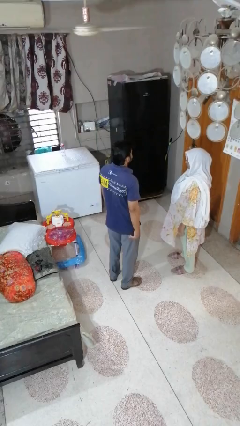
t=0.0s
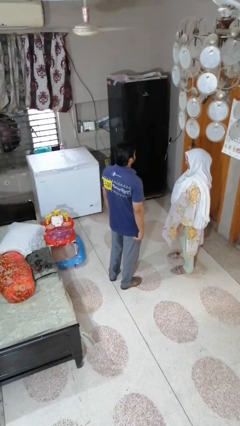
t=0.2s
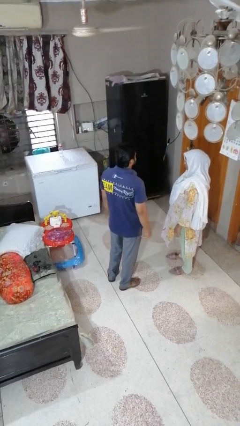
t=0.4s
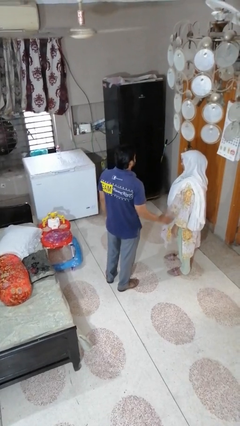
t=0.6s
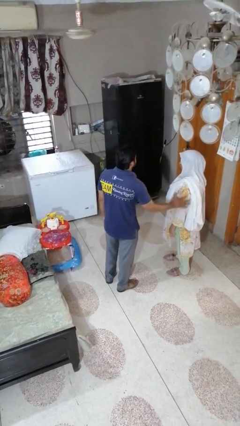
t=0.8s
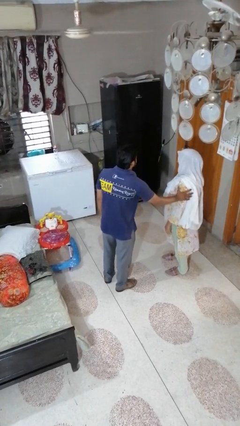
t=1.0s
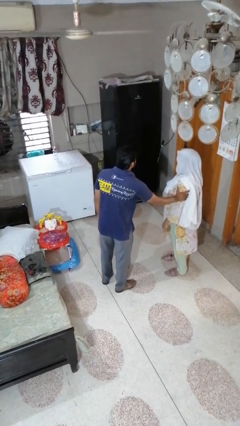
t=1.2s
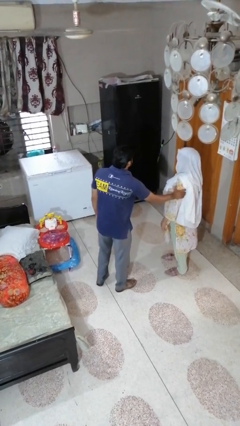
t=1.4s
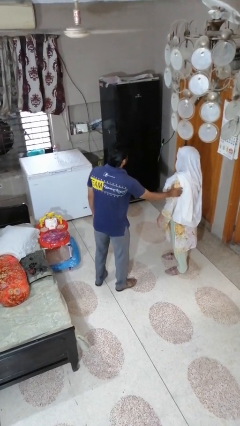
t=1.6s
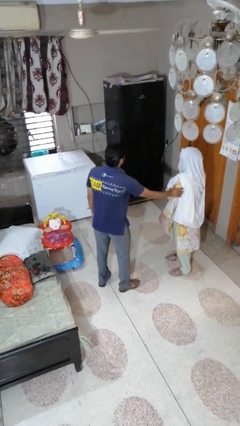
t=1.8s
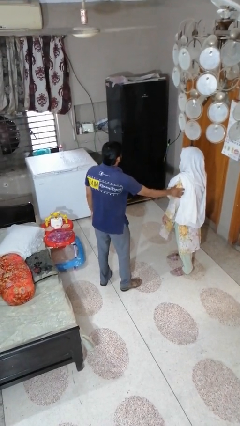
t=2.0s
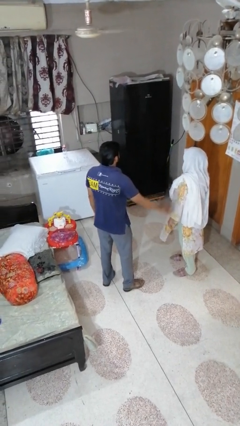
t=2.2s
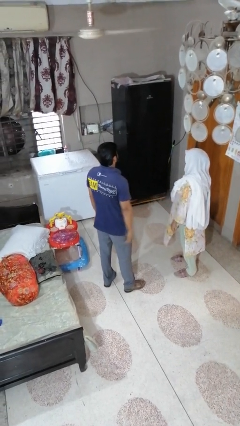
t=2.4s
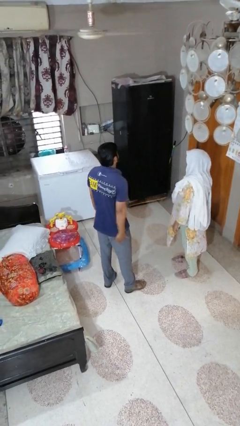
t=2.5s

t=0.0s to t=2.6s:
person grabs person by bicep

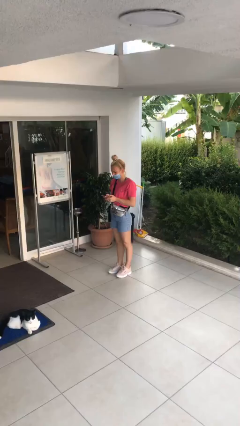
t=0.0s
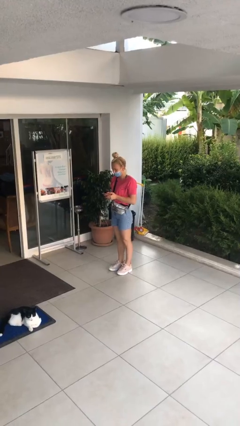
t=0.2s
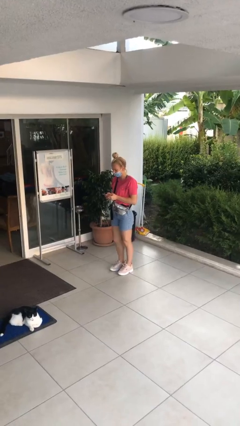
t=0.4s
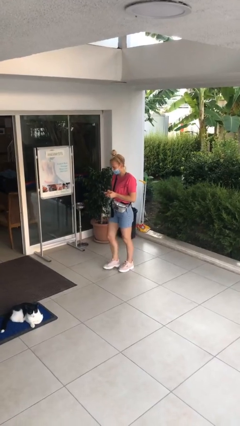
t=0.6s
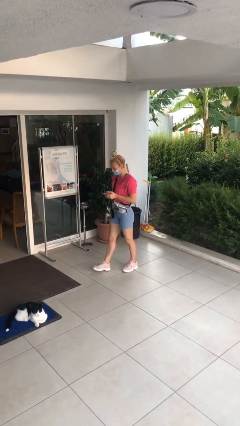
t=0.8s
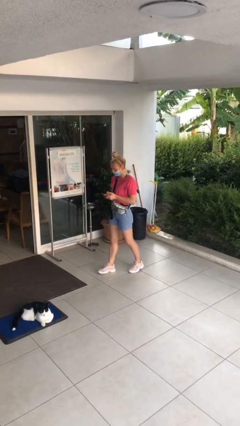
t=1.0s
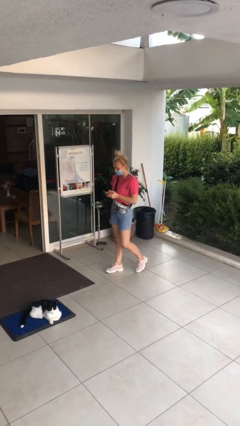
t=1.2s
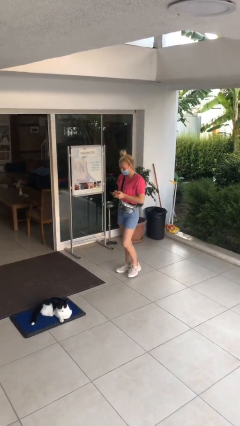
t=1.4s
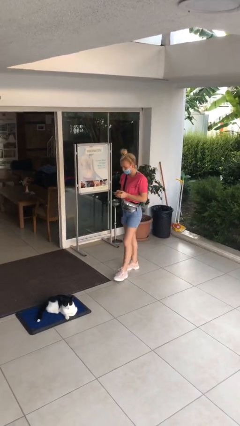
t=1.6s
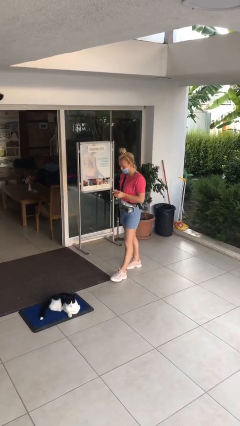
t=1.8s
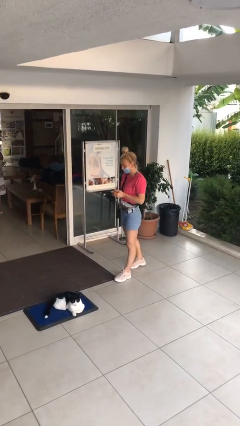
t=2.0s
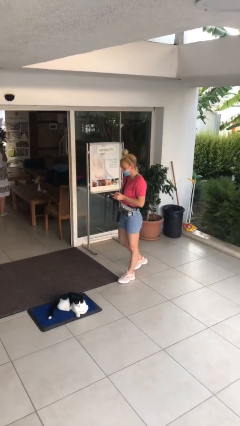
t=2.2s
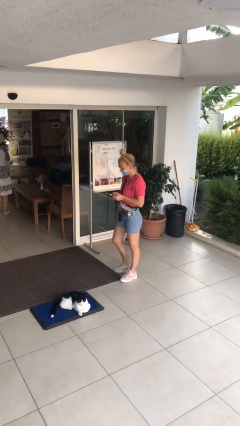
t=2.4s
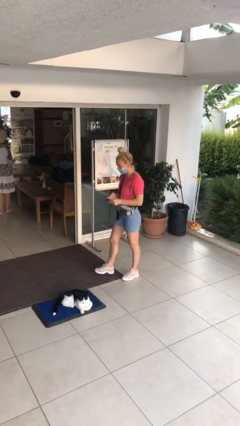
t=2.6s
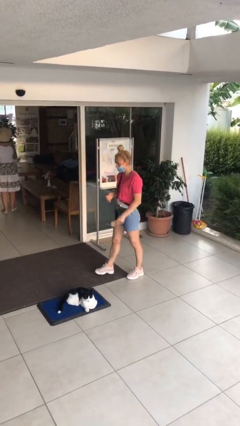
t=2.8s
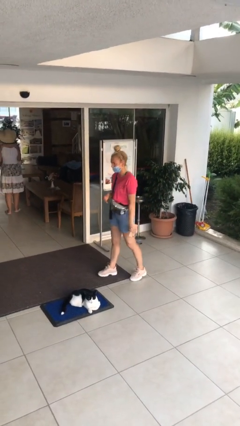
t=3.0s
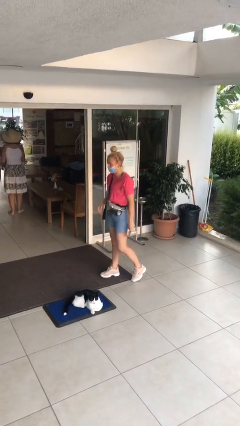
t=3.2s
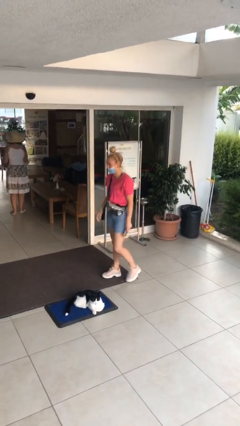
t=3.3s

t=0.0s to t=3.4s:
person texts on phone

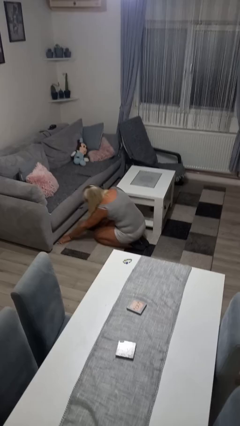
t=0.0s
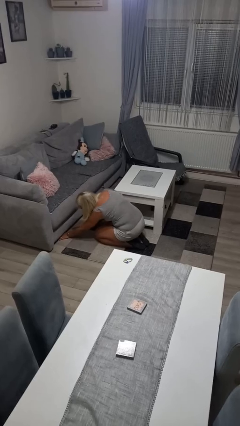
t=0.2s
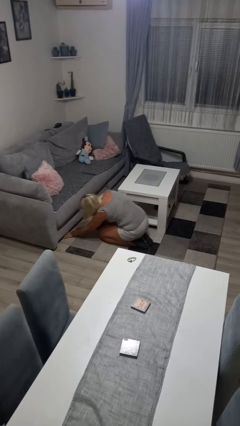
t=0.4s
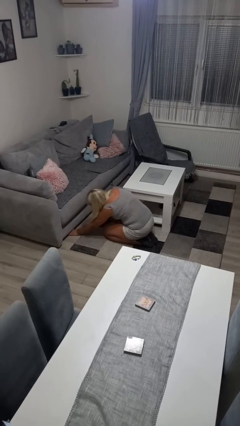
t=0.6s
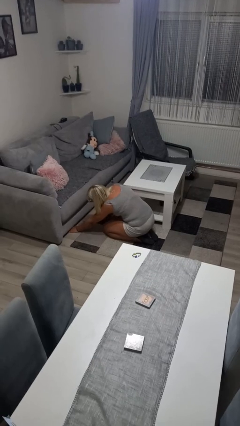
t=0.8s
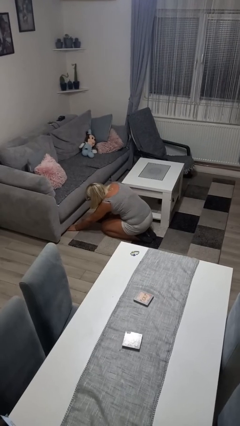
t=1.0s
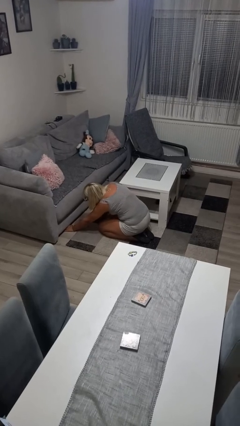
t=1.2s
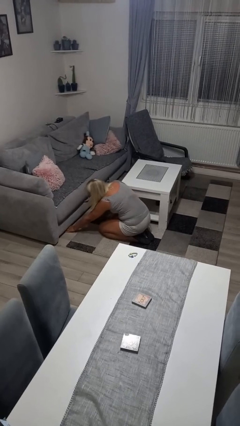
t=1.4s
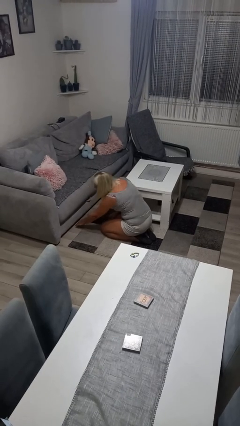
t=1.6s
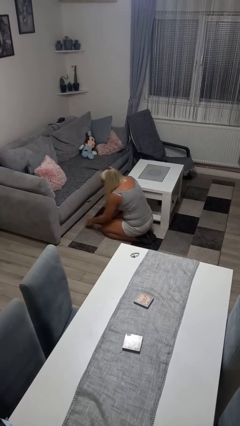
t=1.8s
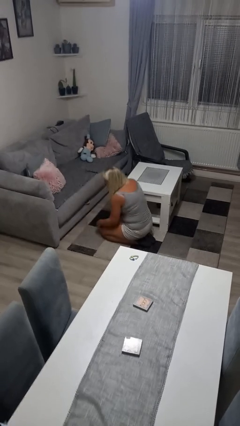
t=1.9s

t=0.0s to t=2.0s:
person searches under couch

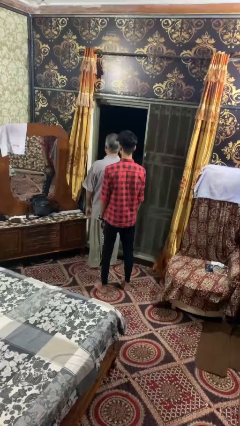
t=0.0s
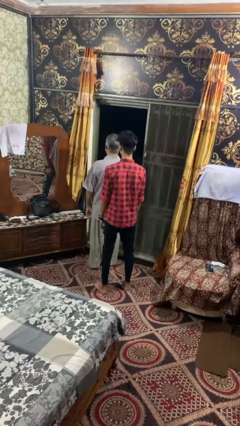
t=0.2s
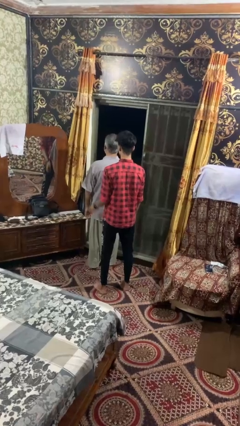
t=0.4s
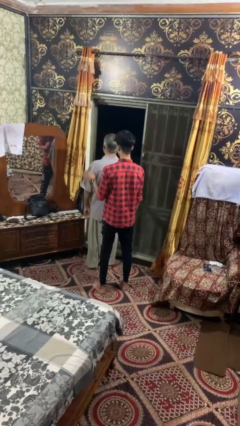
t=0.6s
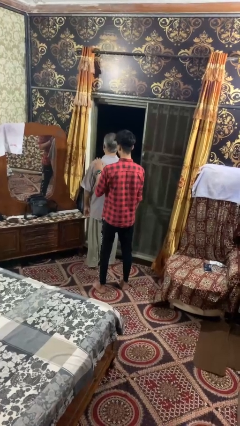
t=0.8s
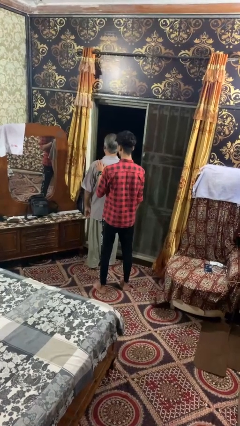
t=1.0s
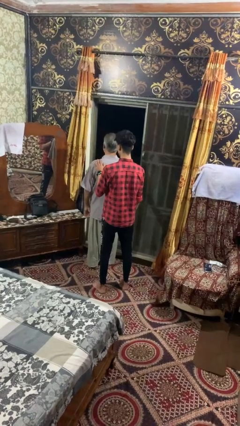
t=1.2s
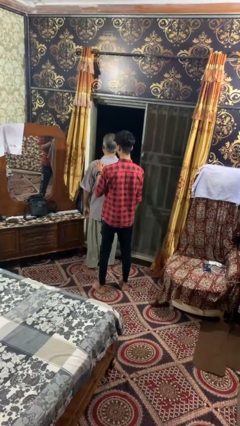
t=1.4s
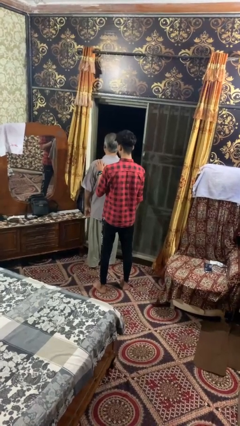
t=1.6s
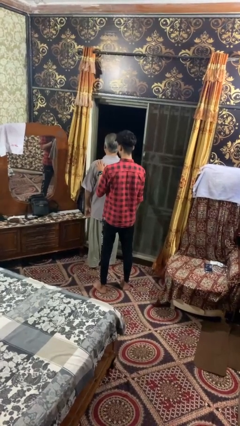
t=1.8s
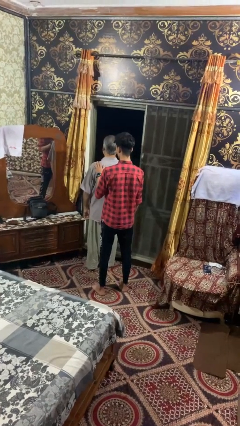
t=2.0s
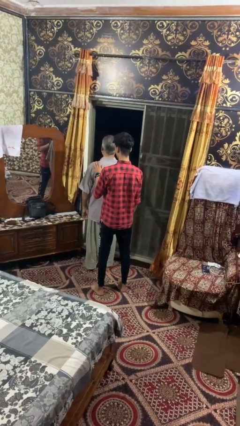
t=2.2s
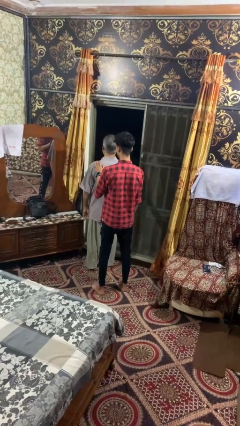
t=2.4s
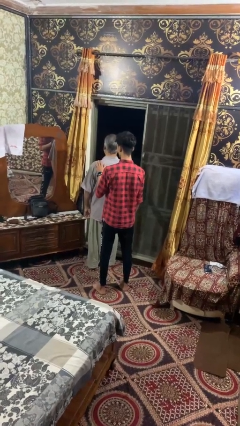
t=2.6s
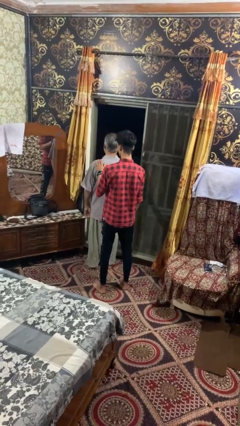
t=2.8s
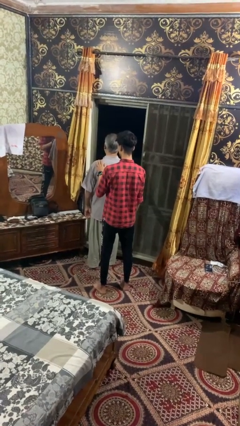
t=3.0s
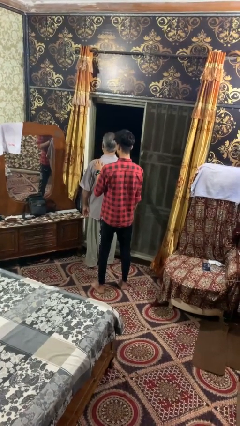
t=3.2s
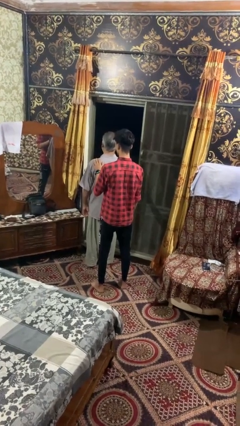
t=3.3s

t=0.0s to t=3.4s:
person touches back of person

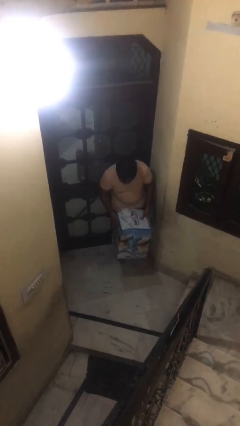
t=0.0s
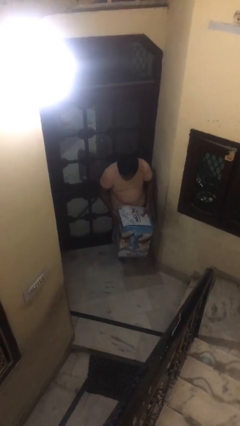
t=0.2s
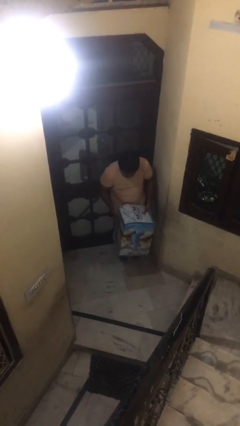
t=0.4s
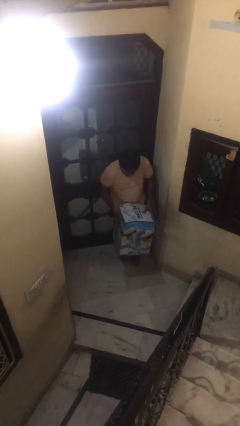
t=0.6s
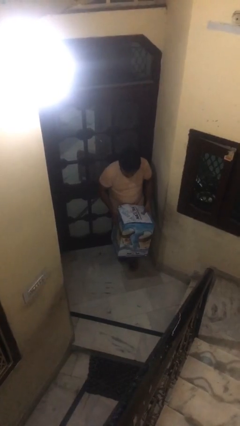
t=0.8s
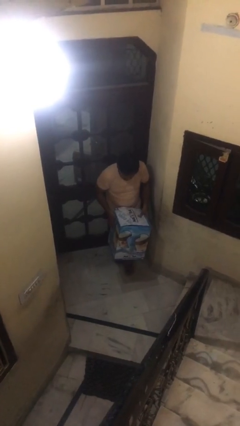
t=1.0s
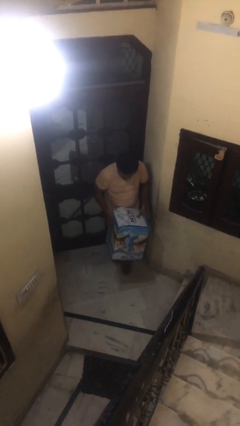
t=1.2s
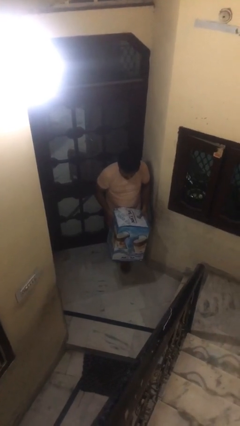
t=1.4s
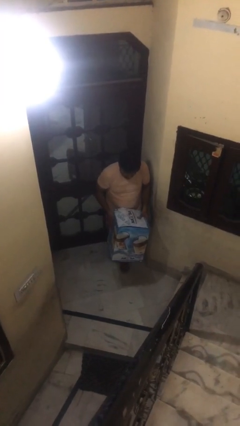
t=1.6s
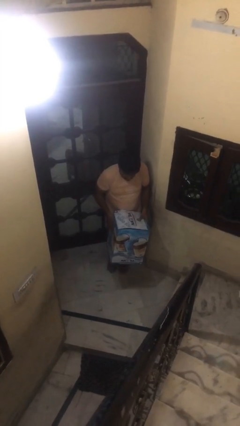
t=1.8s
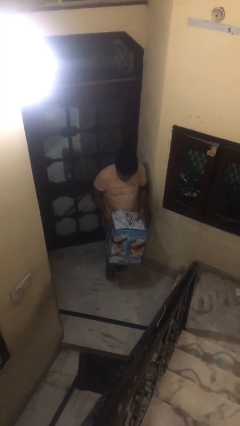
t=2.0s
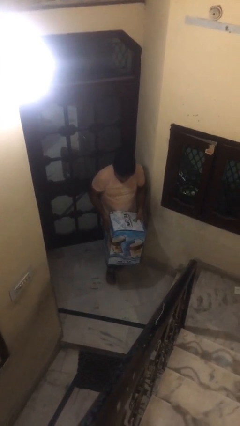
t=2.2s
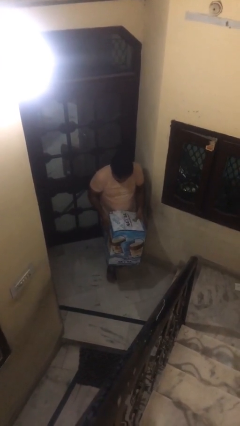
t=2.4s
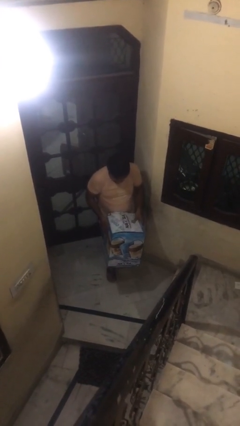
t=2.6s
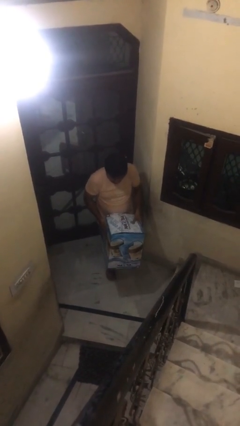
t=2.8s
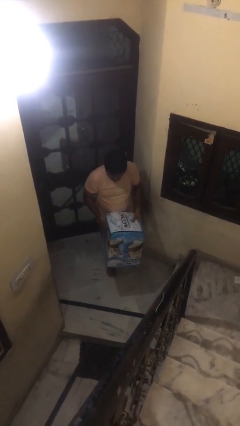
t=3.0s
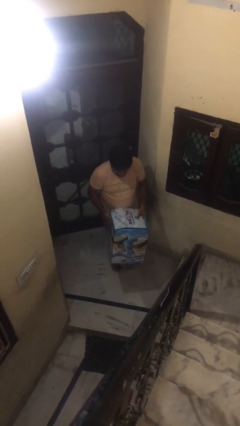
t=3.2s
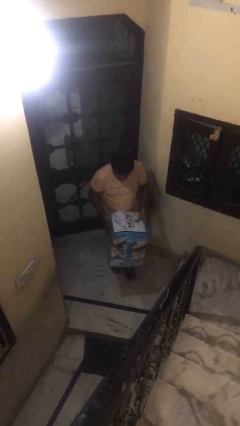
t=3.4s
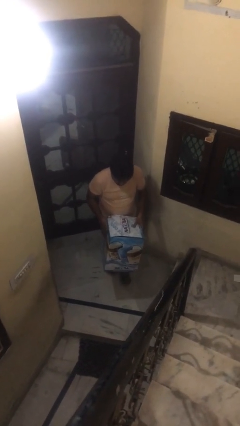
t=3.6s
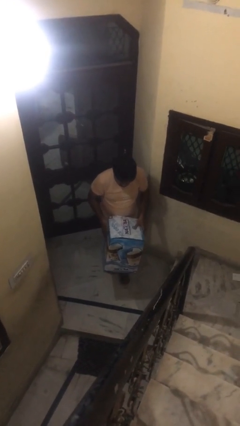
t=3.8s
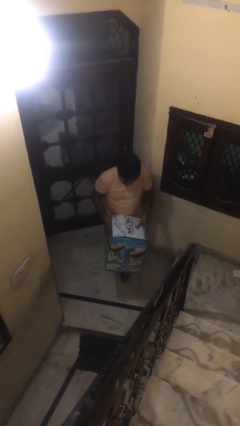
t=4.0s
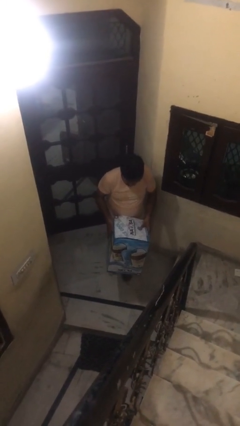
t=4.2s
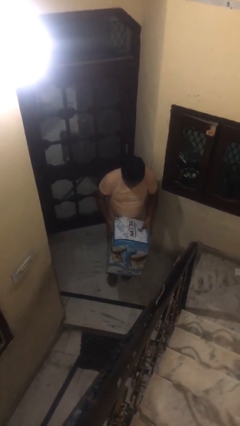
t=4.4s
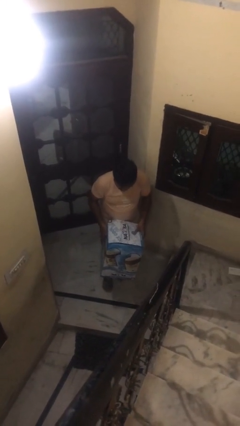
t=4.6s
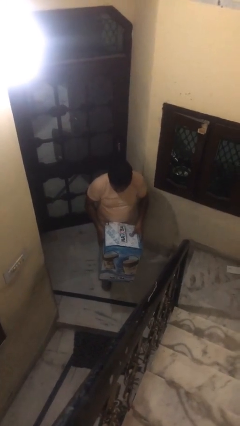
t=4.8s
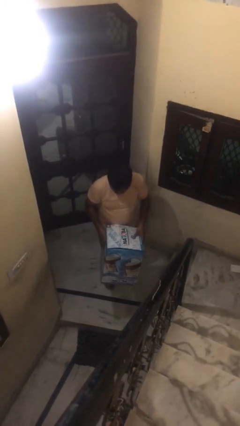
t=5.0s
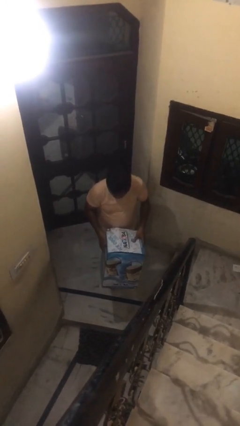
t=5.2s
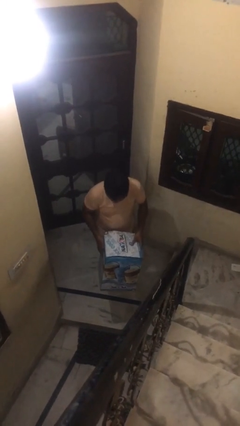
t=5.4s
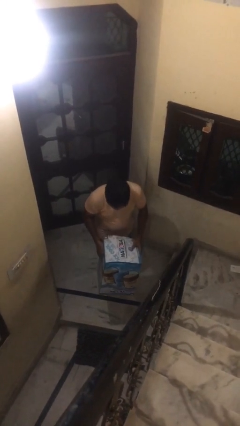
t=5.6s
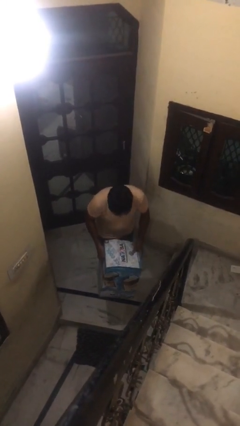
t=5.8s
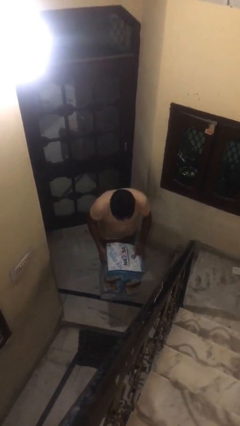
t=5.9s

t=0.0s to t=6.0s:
person carries heavy object
